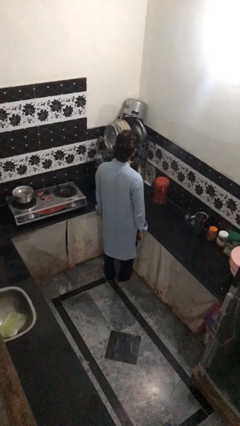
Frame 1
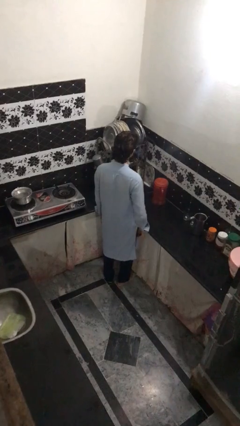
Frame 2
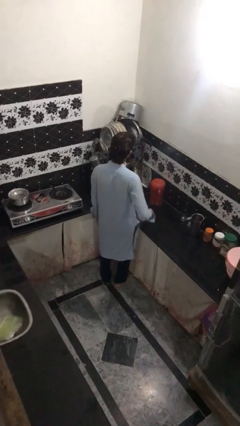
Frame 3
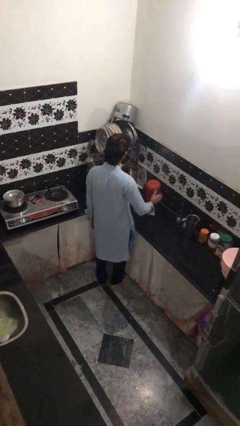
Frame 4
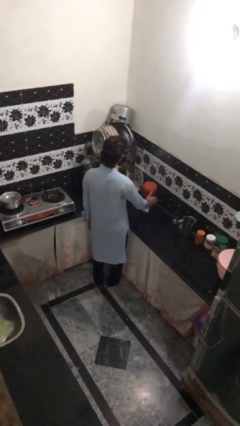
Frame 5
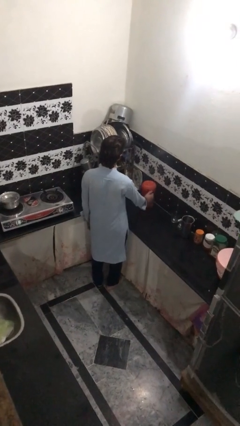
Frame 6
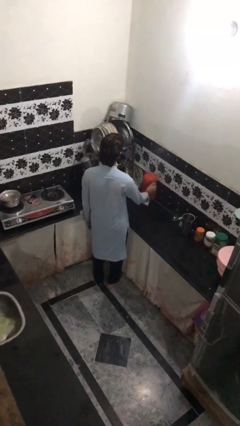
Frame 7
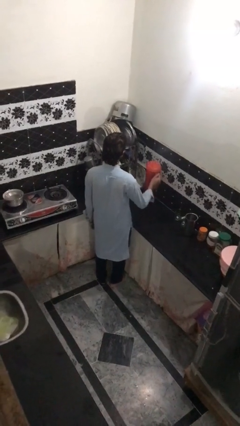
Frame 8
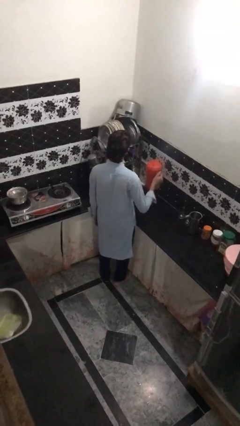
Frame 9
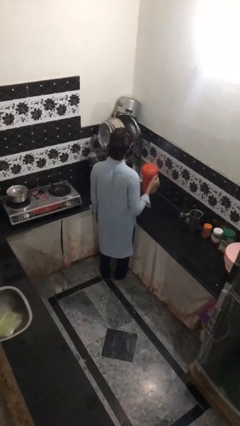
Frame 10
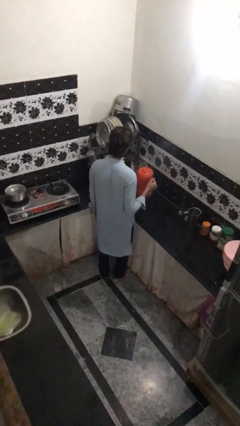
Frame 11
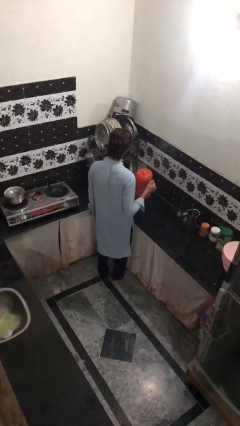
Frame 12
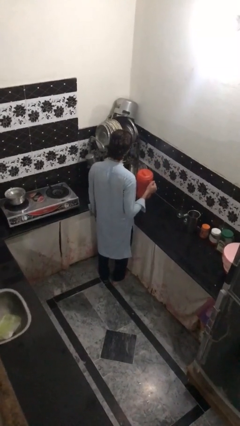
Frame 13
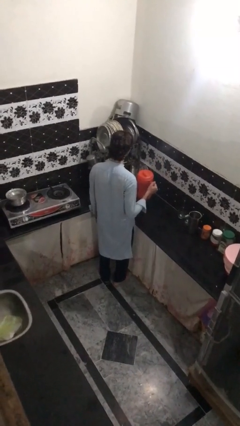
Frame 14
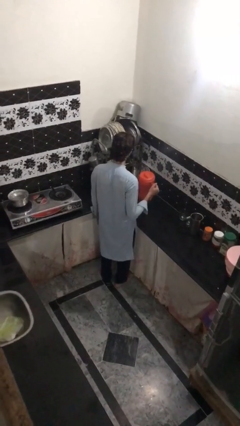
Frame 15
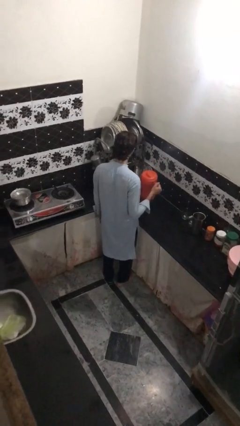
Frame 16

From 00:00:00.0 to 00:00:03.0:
person picks up object from countertop

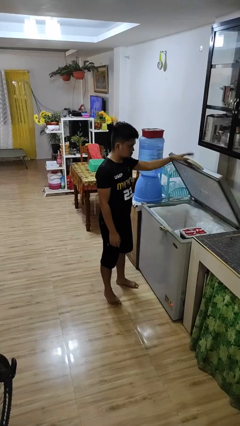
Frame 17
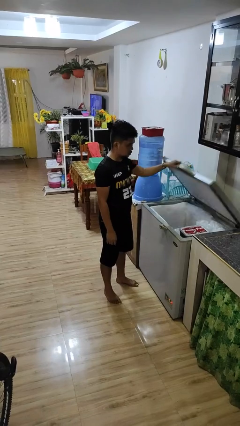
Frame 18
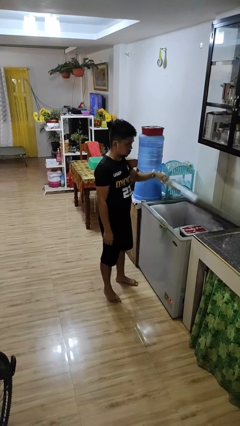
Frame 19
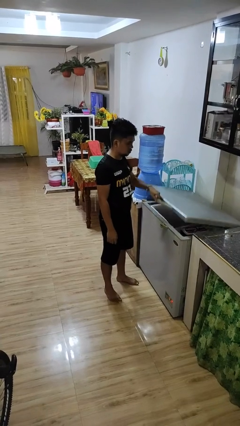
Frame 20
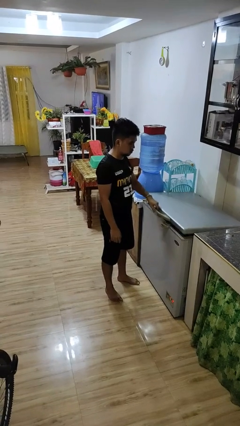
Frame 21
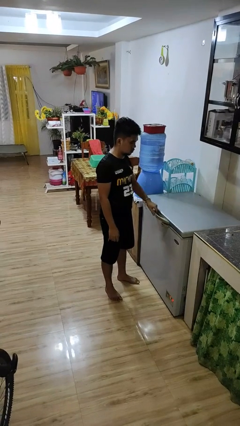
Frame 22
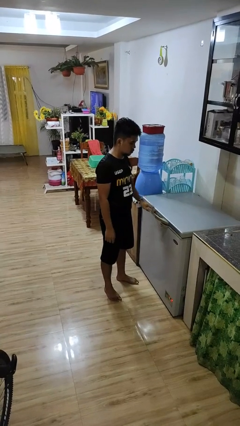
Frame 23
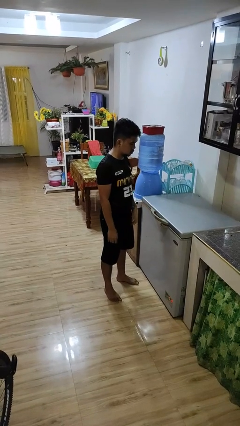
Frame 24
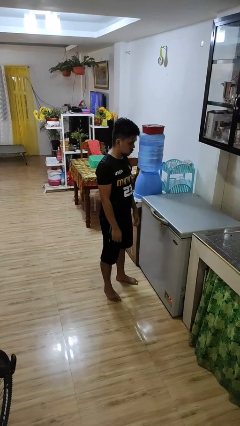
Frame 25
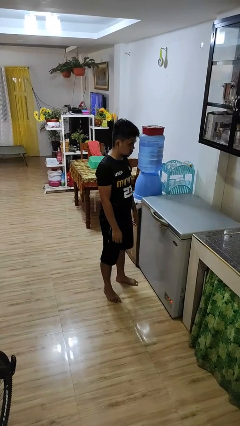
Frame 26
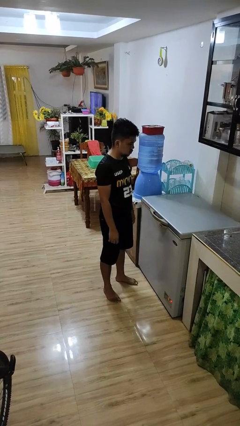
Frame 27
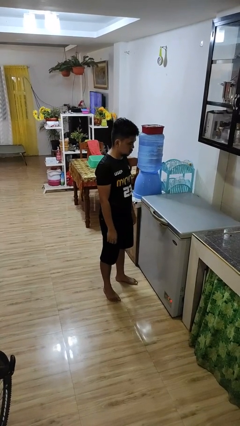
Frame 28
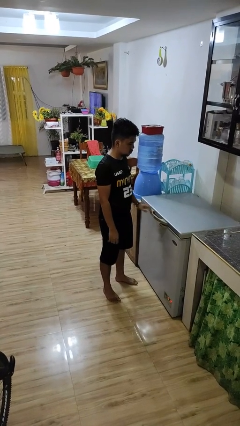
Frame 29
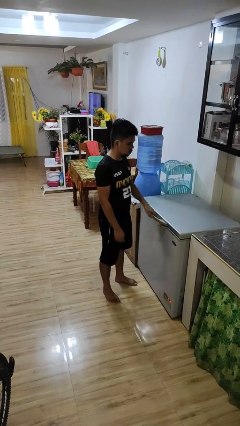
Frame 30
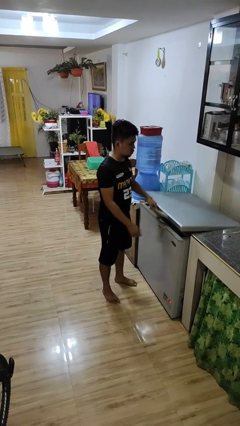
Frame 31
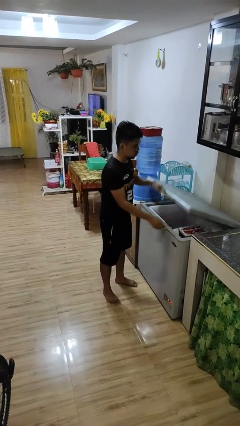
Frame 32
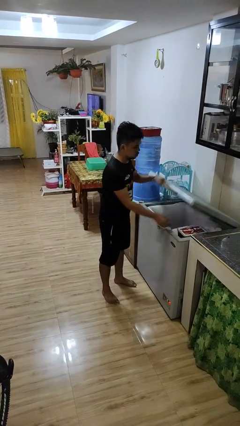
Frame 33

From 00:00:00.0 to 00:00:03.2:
person closes refrigerator

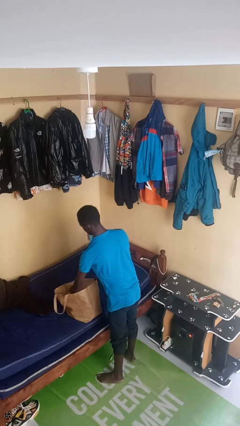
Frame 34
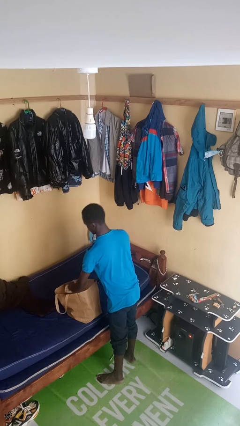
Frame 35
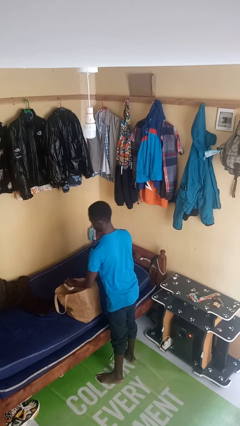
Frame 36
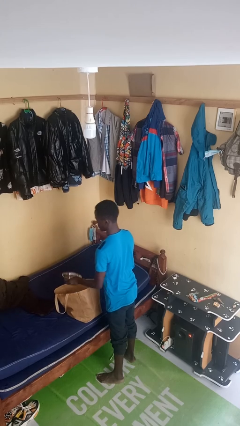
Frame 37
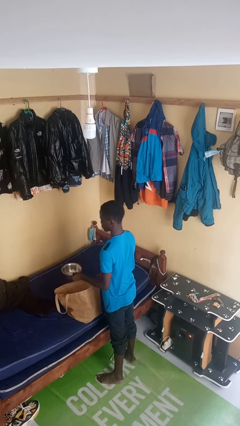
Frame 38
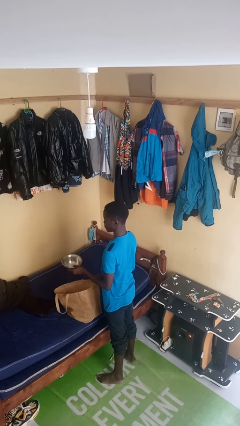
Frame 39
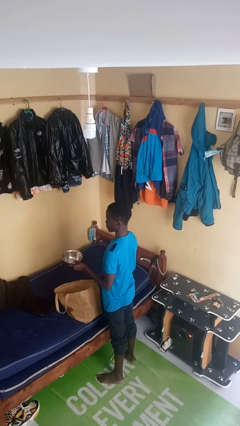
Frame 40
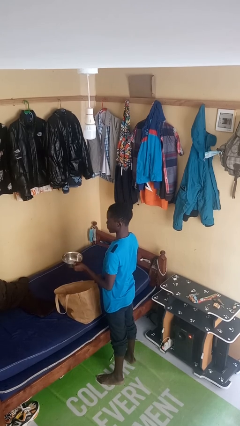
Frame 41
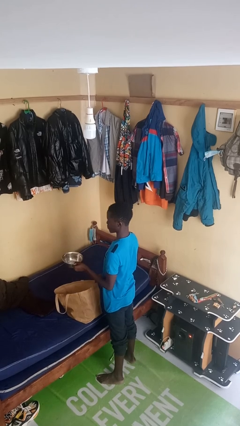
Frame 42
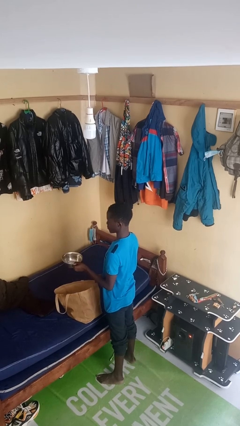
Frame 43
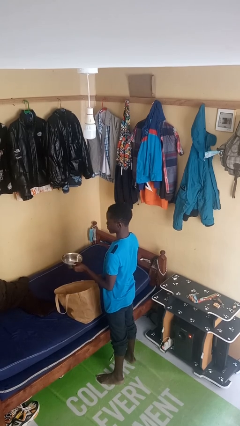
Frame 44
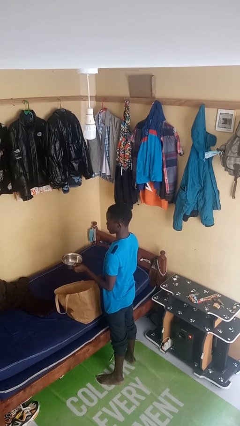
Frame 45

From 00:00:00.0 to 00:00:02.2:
person takes object from bag

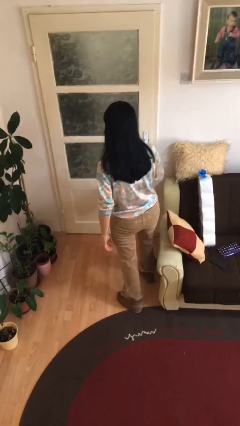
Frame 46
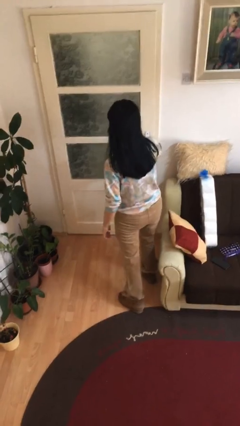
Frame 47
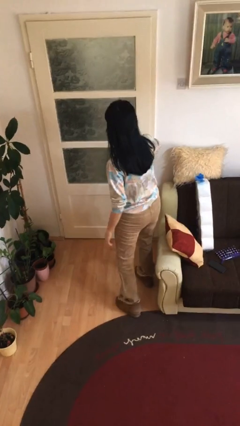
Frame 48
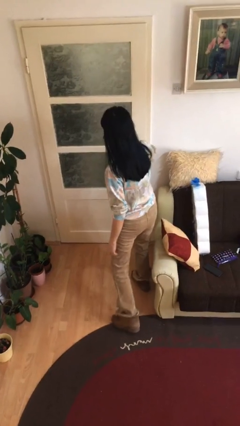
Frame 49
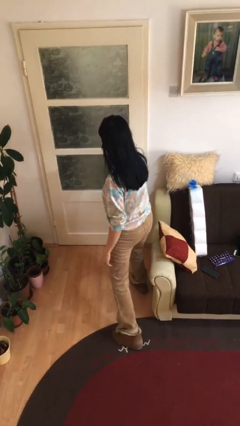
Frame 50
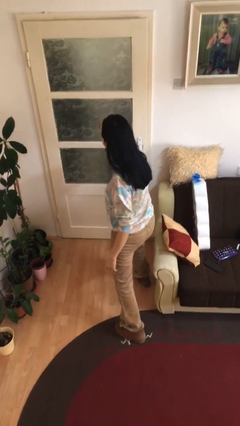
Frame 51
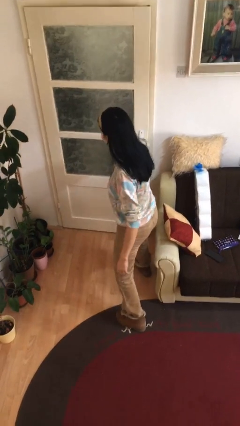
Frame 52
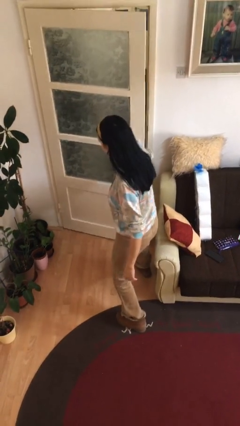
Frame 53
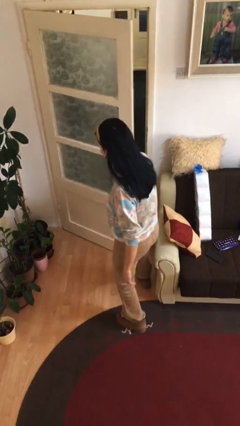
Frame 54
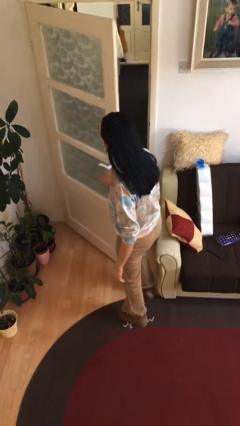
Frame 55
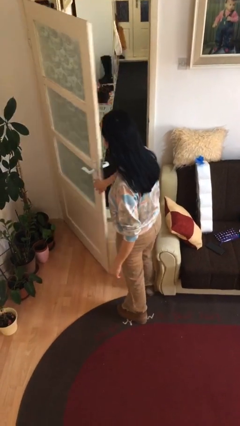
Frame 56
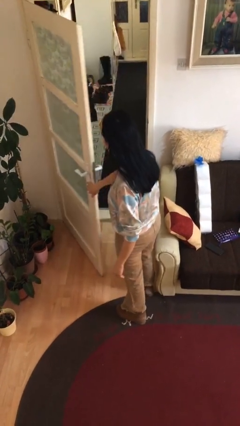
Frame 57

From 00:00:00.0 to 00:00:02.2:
person opens facility door

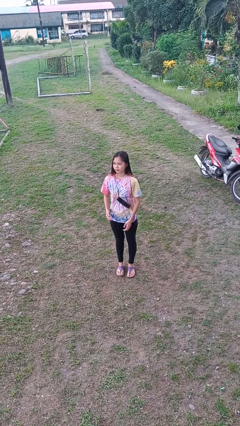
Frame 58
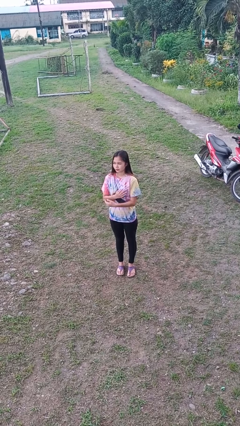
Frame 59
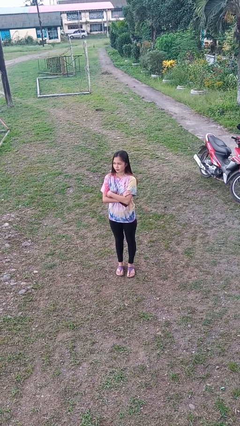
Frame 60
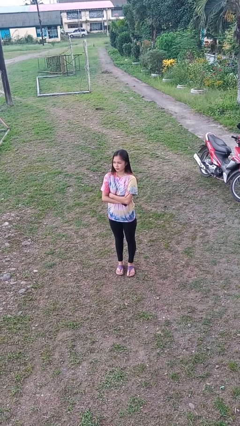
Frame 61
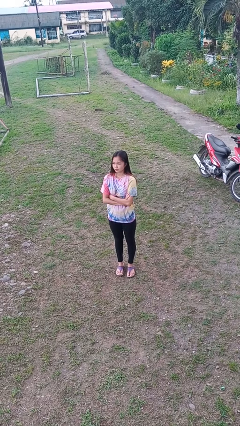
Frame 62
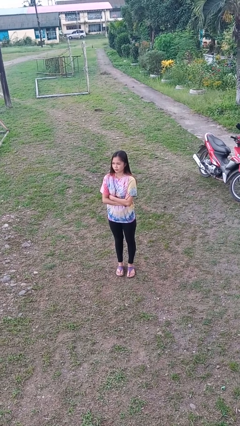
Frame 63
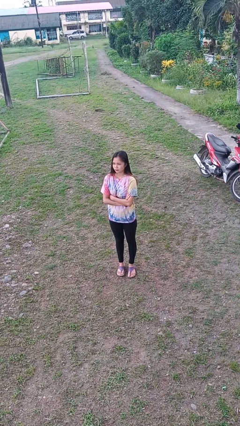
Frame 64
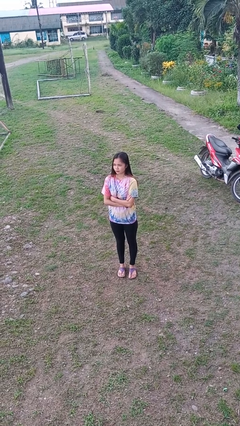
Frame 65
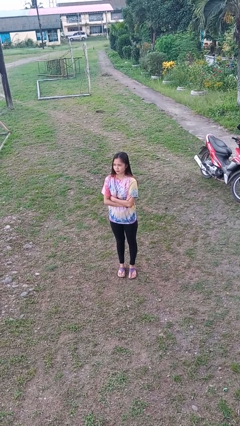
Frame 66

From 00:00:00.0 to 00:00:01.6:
person crosses arms

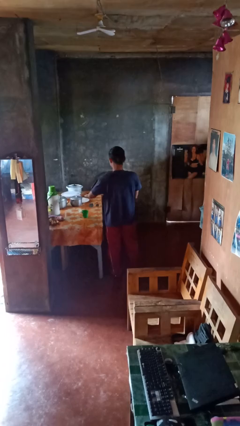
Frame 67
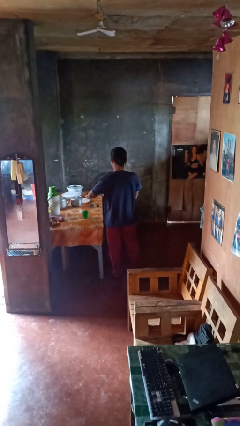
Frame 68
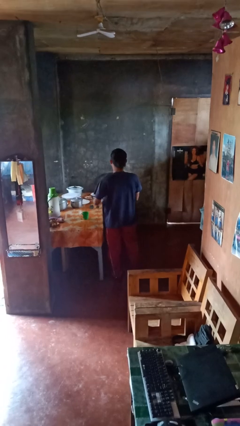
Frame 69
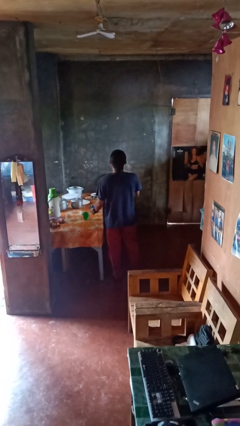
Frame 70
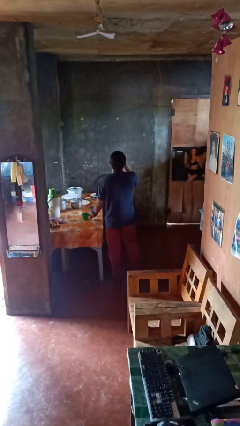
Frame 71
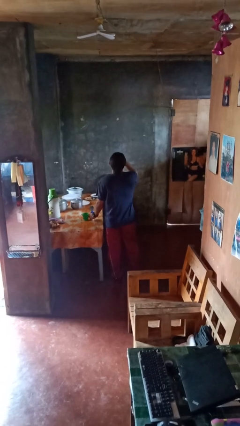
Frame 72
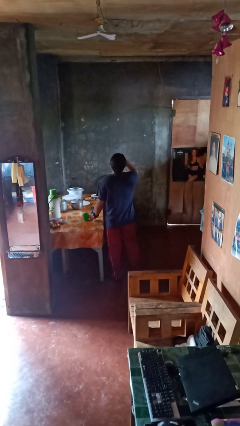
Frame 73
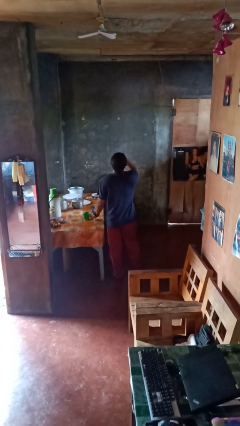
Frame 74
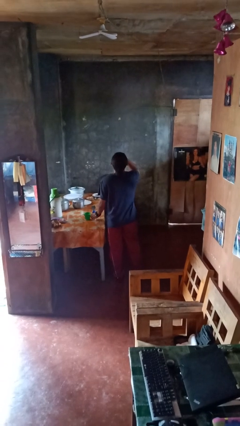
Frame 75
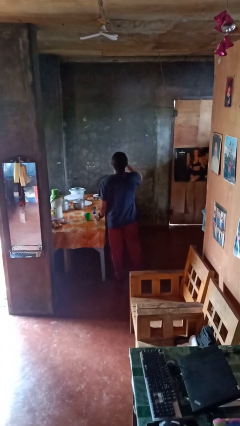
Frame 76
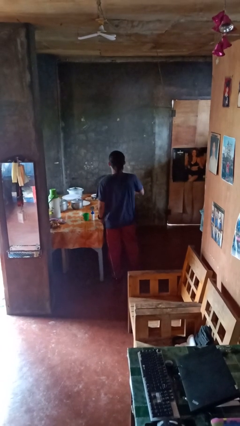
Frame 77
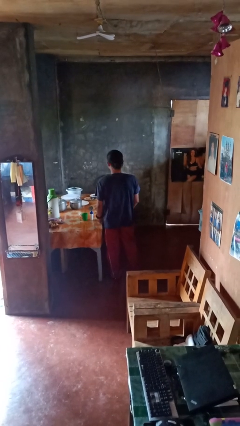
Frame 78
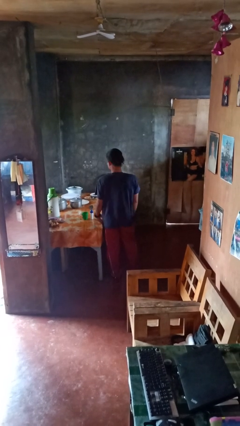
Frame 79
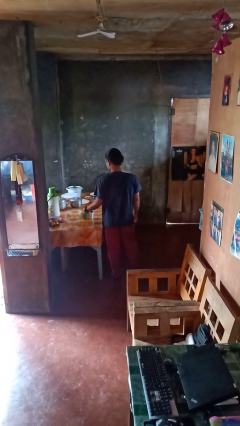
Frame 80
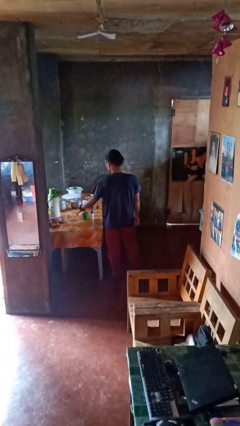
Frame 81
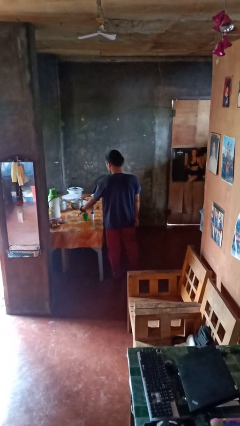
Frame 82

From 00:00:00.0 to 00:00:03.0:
person takes medicine pills

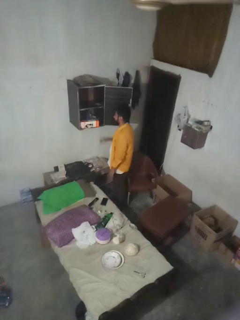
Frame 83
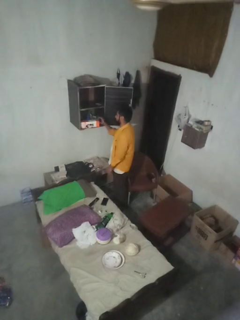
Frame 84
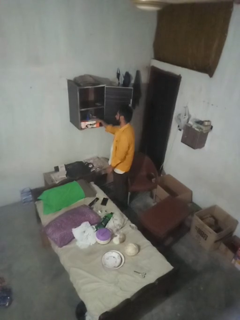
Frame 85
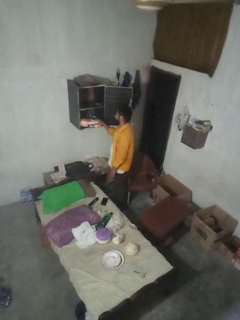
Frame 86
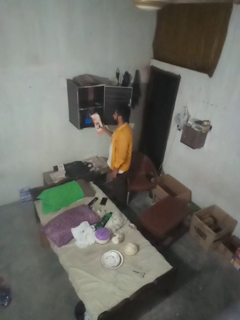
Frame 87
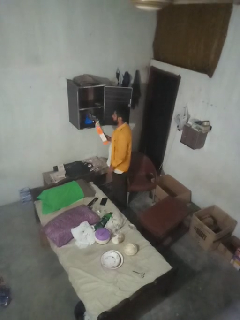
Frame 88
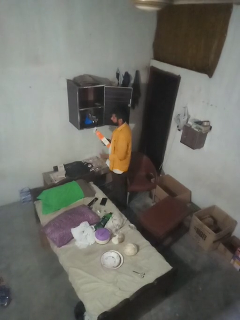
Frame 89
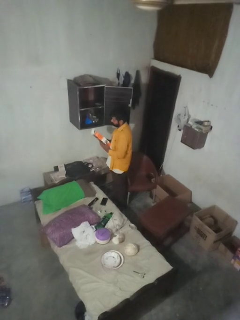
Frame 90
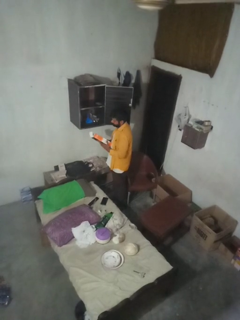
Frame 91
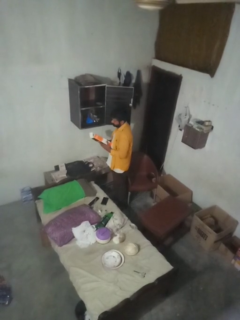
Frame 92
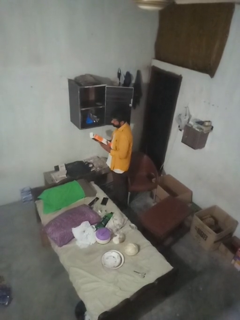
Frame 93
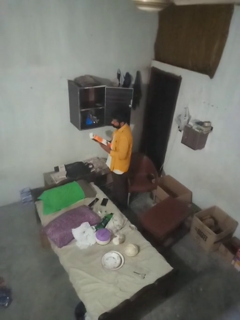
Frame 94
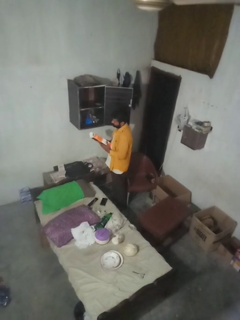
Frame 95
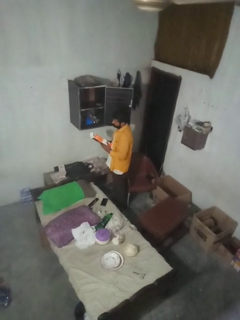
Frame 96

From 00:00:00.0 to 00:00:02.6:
person picks up object from cabinet
